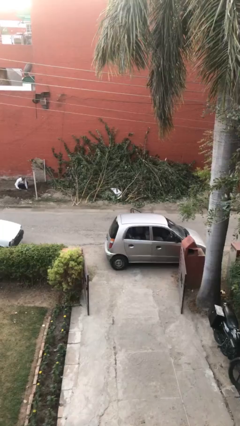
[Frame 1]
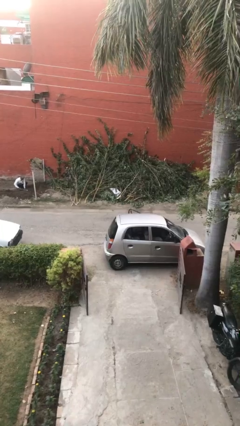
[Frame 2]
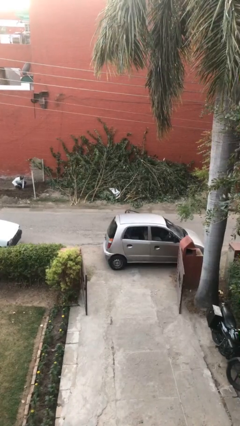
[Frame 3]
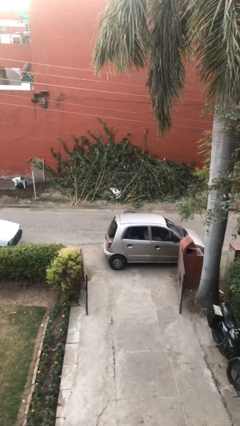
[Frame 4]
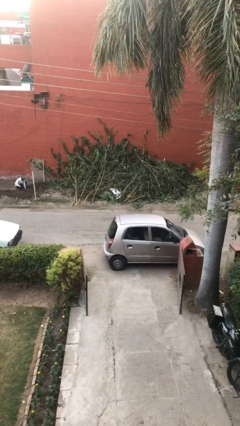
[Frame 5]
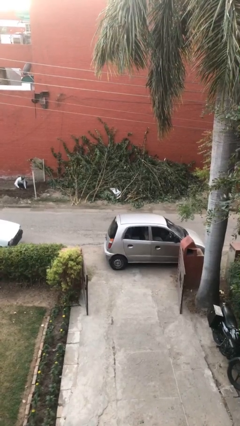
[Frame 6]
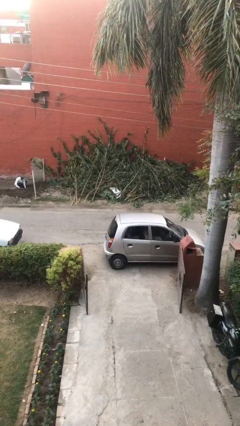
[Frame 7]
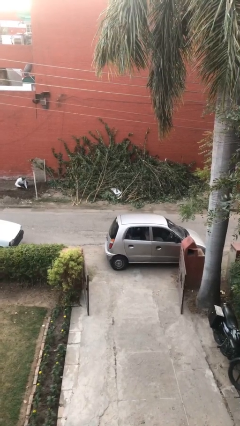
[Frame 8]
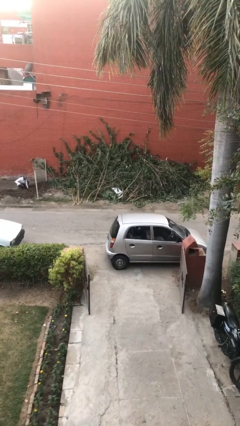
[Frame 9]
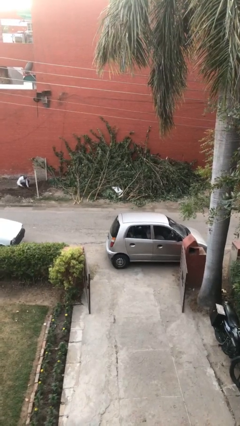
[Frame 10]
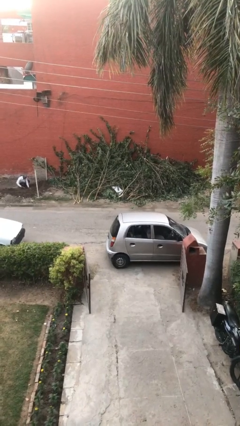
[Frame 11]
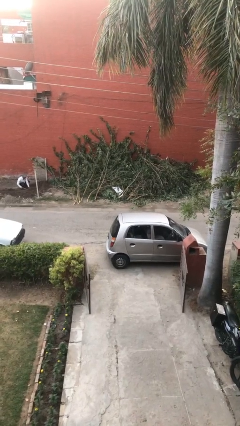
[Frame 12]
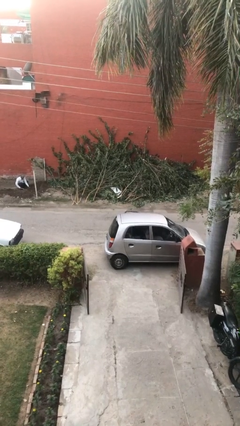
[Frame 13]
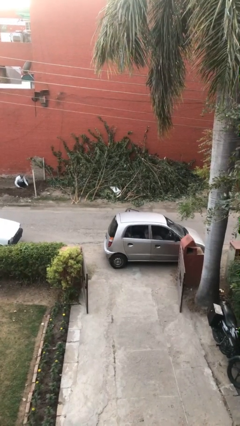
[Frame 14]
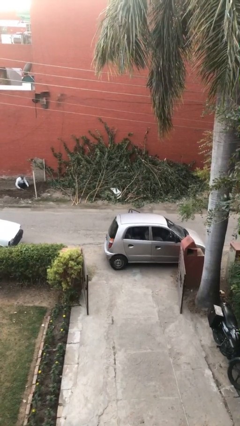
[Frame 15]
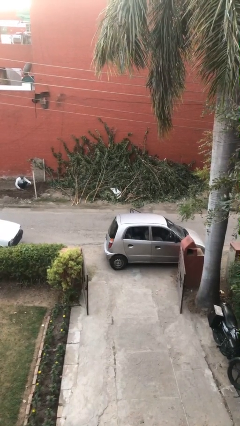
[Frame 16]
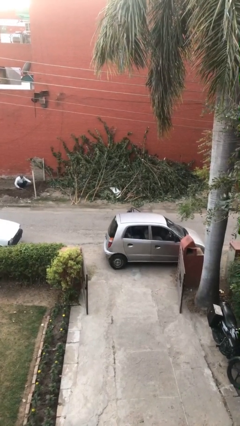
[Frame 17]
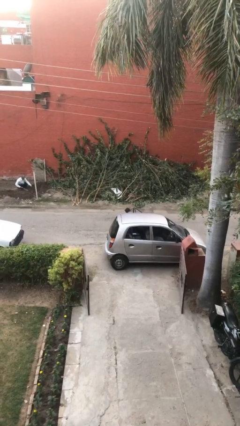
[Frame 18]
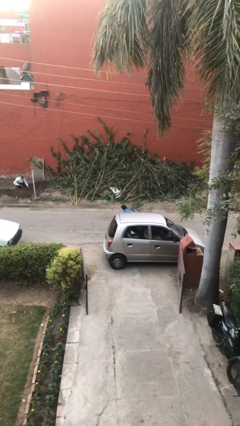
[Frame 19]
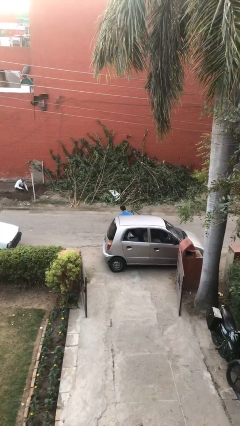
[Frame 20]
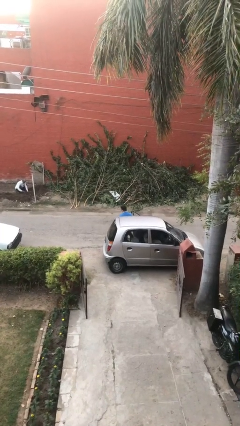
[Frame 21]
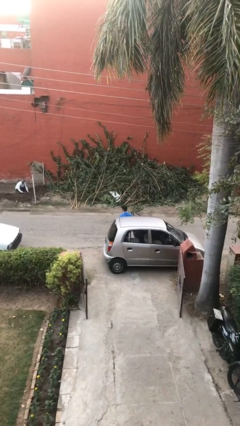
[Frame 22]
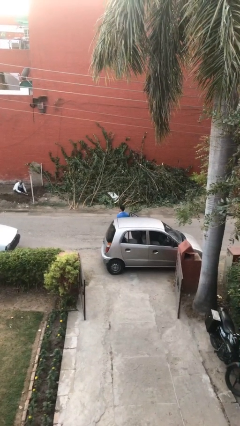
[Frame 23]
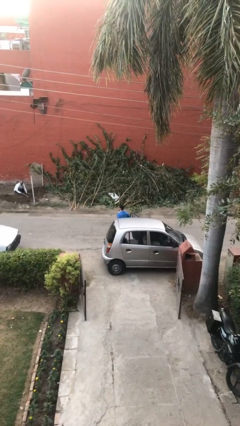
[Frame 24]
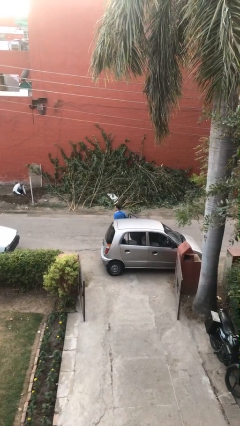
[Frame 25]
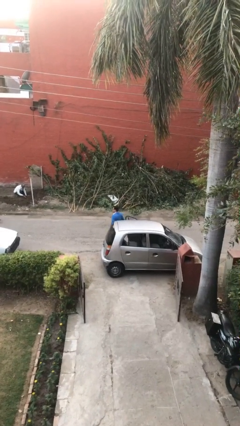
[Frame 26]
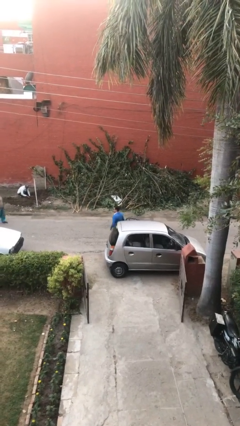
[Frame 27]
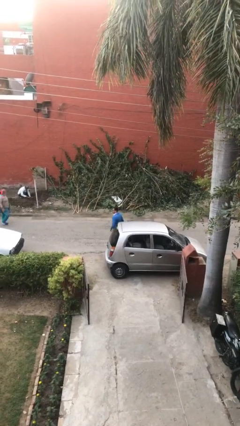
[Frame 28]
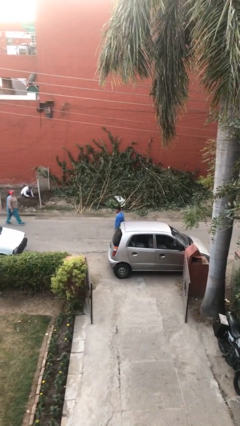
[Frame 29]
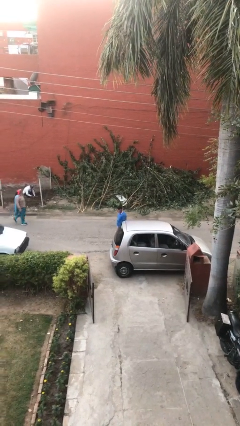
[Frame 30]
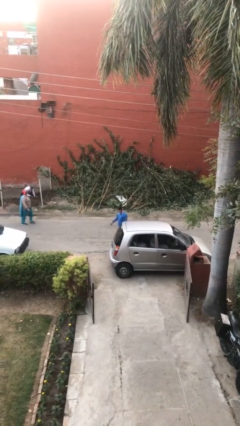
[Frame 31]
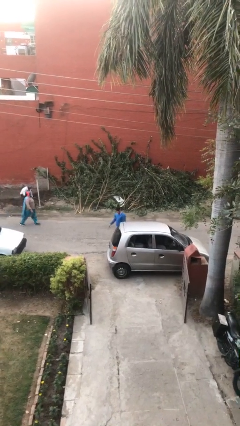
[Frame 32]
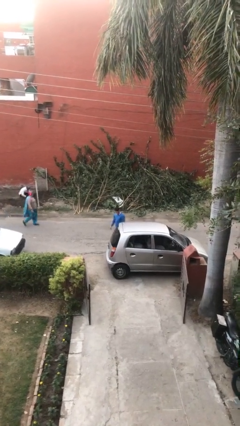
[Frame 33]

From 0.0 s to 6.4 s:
person exits car

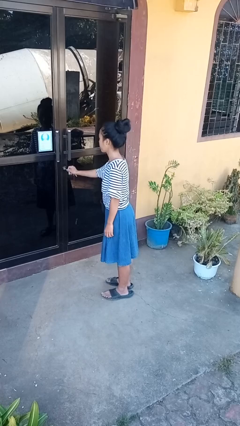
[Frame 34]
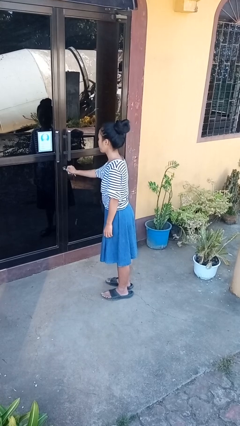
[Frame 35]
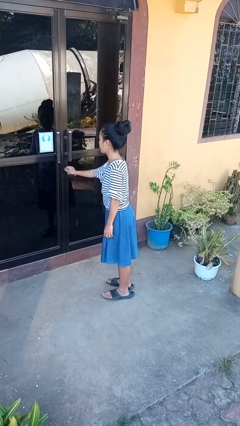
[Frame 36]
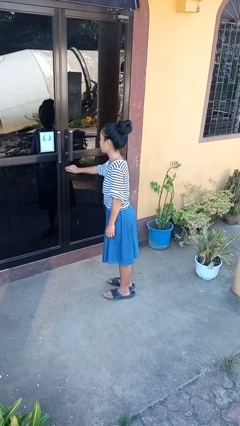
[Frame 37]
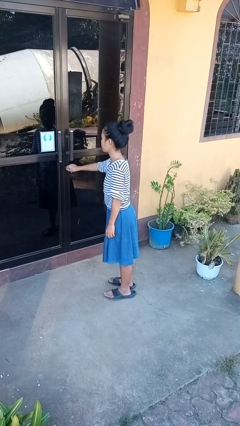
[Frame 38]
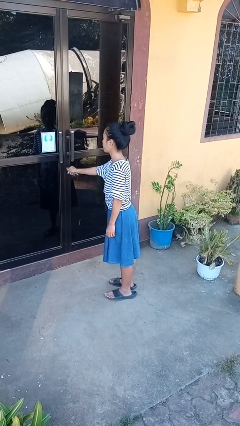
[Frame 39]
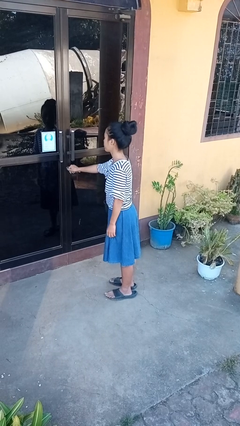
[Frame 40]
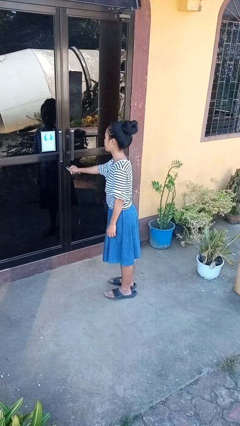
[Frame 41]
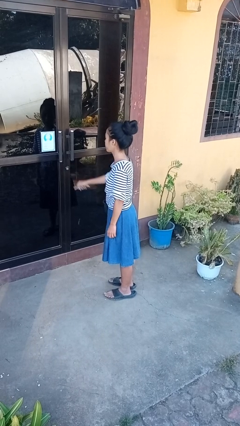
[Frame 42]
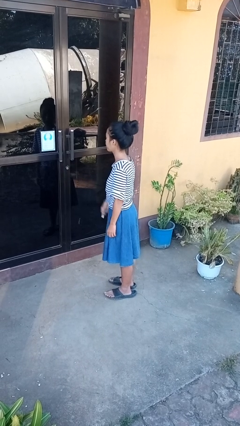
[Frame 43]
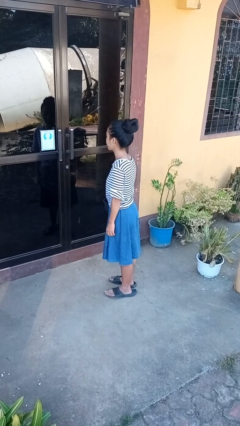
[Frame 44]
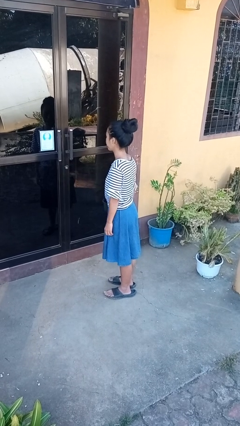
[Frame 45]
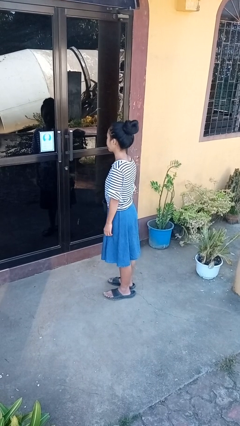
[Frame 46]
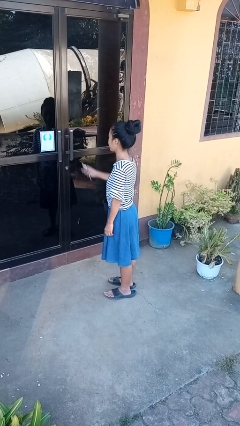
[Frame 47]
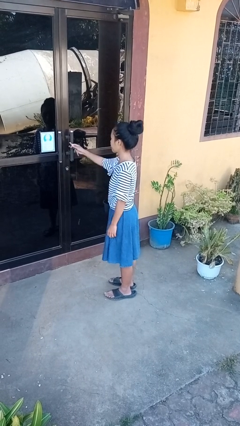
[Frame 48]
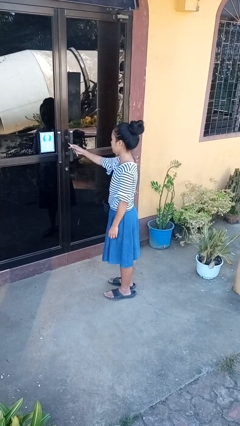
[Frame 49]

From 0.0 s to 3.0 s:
person unlocks door with keys

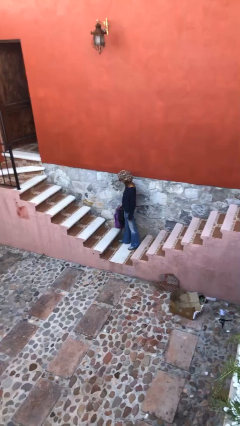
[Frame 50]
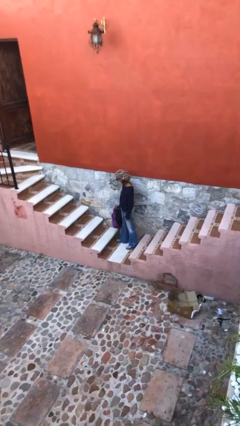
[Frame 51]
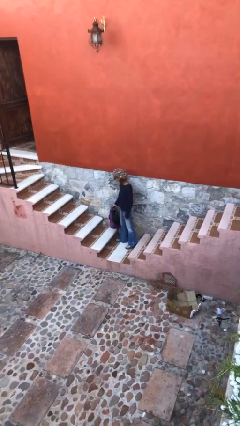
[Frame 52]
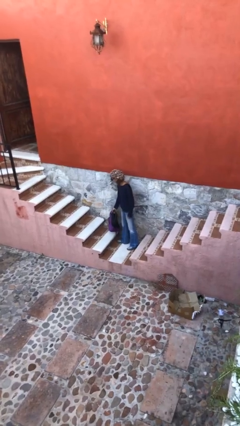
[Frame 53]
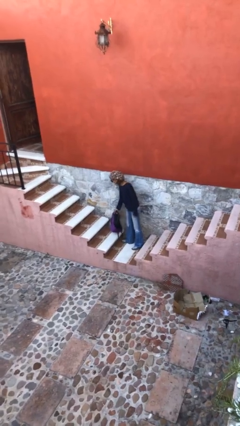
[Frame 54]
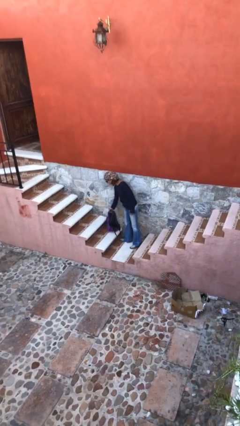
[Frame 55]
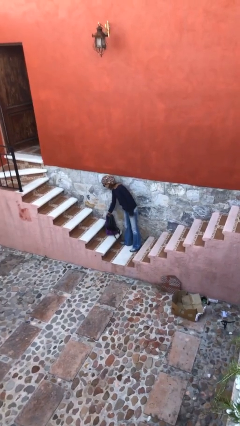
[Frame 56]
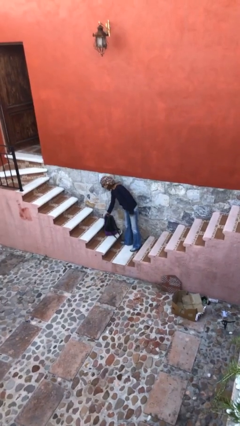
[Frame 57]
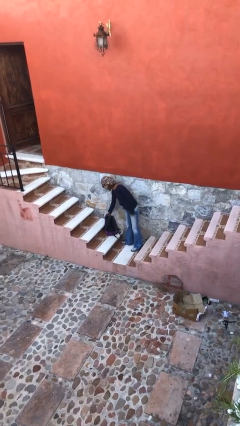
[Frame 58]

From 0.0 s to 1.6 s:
person puts down object on floor

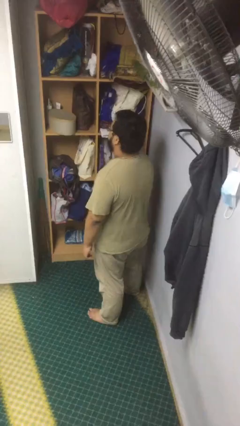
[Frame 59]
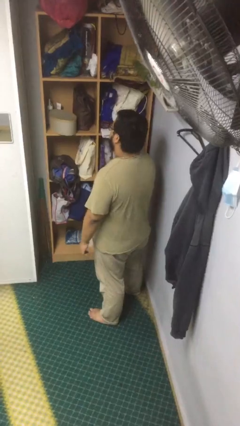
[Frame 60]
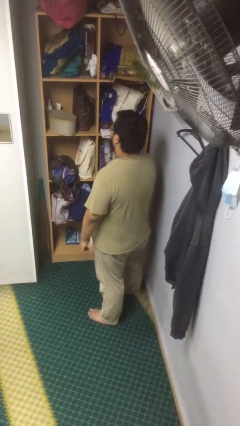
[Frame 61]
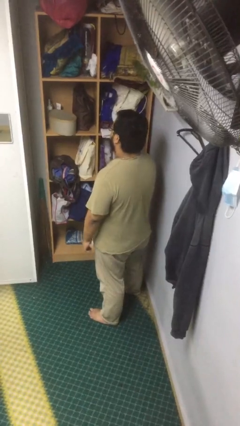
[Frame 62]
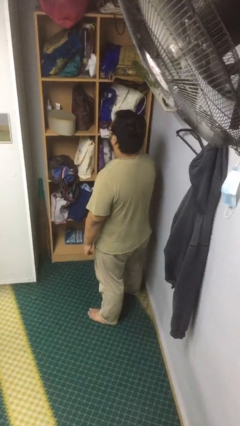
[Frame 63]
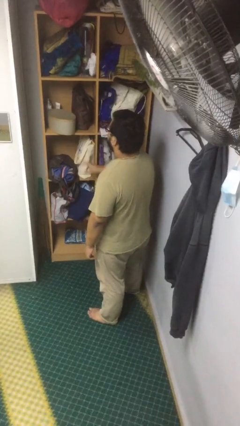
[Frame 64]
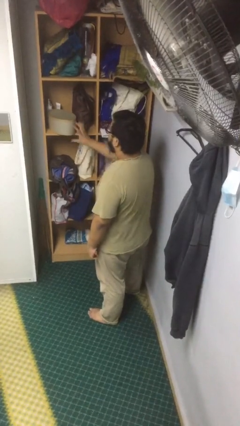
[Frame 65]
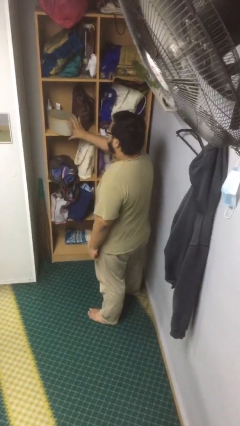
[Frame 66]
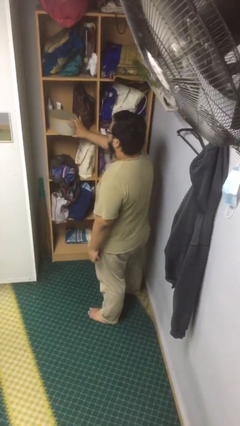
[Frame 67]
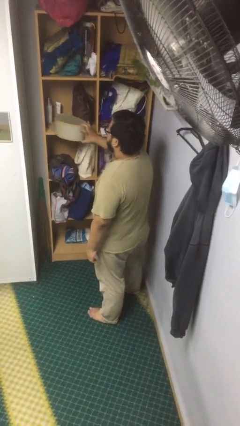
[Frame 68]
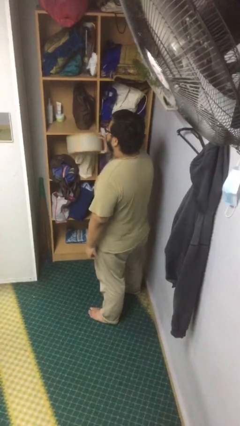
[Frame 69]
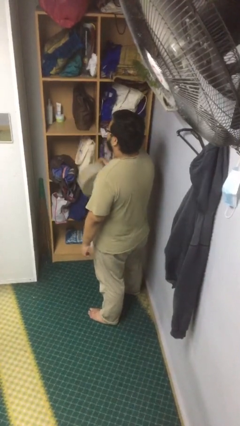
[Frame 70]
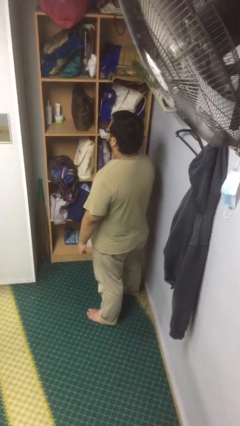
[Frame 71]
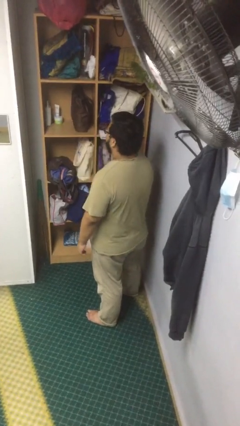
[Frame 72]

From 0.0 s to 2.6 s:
person picks up object from cabinet

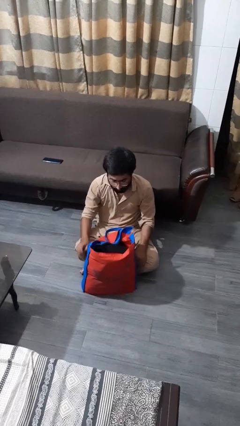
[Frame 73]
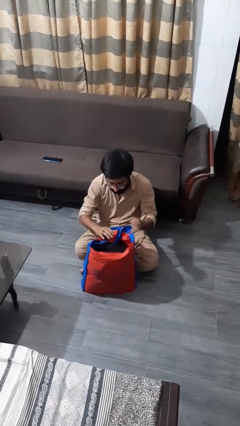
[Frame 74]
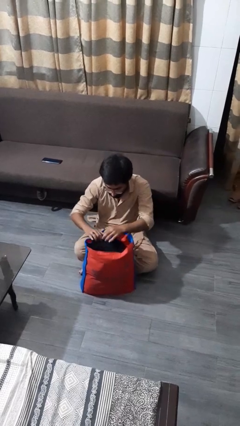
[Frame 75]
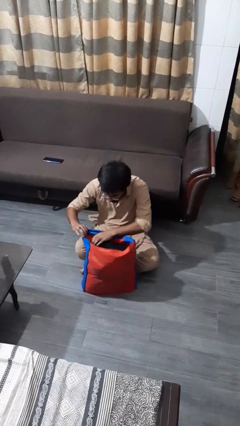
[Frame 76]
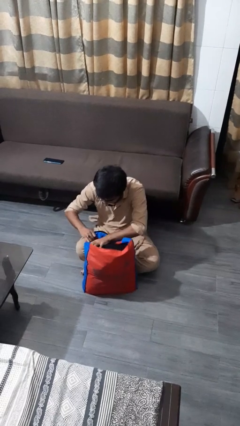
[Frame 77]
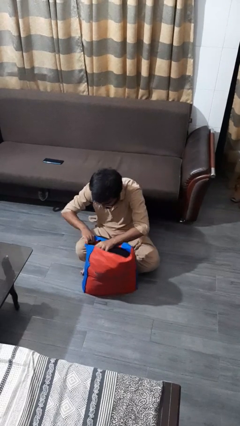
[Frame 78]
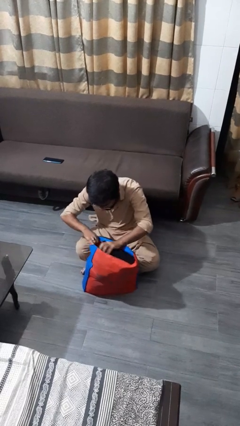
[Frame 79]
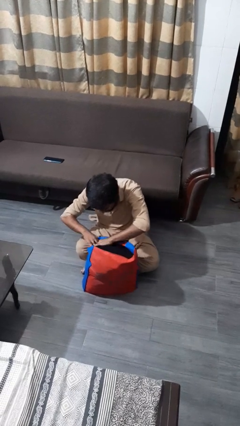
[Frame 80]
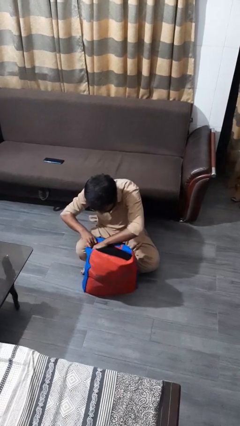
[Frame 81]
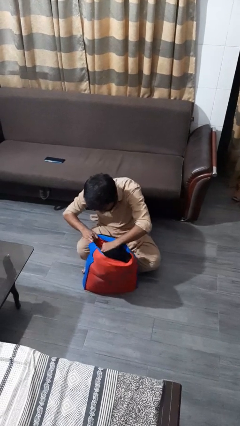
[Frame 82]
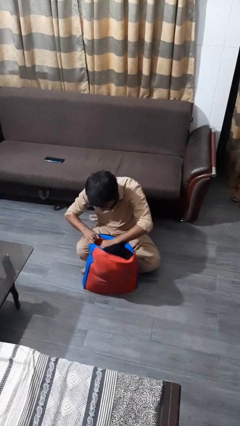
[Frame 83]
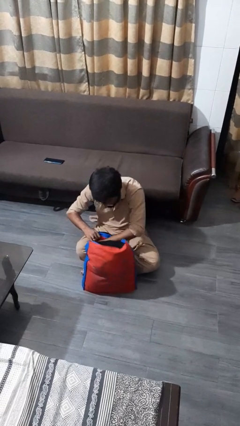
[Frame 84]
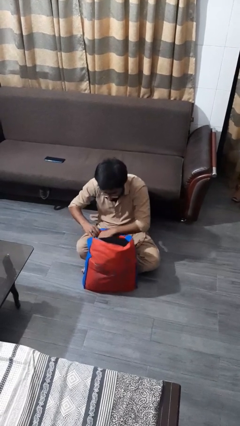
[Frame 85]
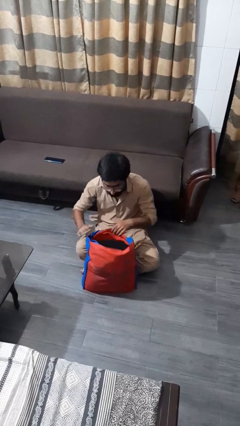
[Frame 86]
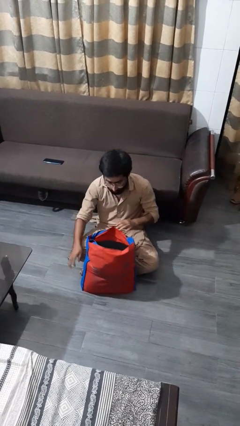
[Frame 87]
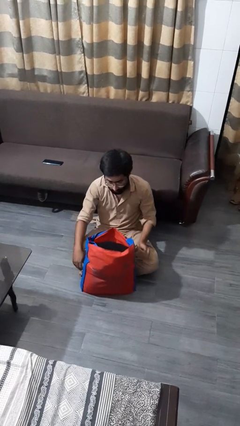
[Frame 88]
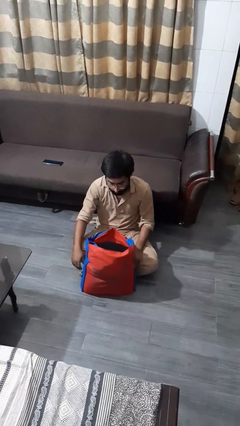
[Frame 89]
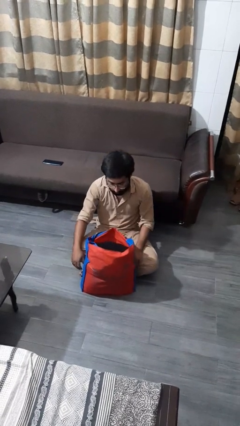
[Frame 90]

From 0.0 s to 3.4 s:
person searches in bag

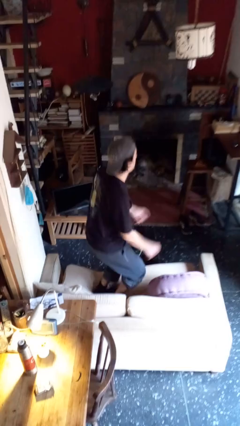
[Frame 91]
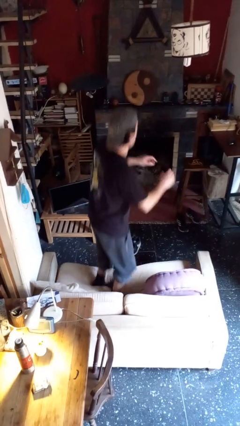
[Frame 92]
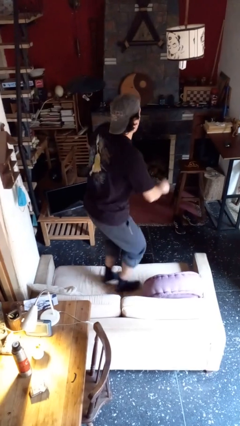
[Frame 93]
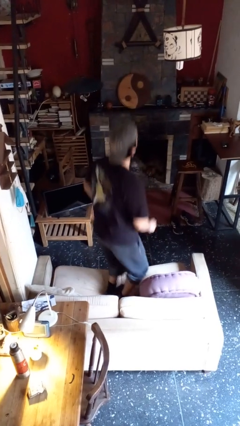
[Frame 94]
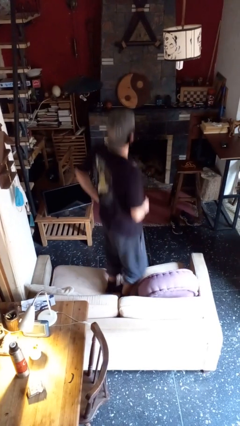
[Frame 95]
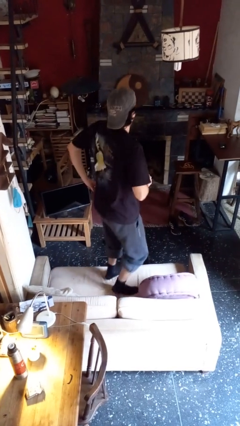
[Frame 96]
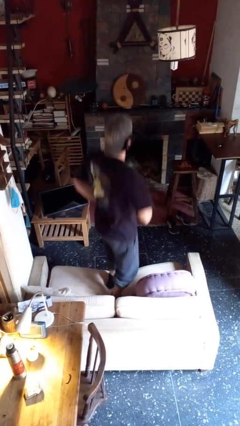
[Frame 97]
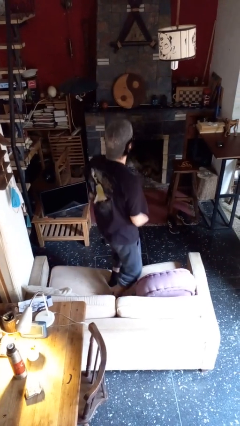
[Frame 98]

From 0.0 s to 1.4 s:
person jumps on couch
